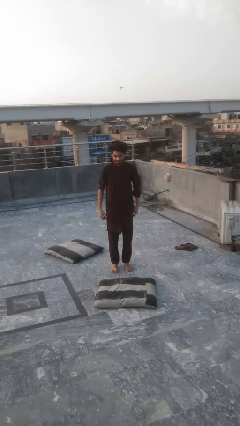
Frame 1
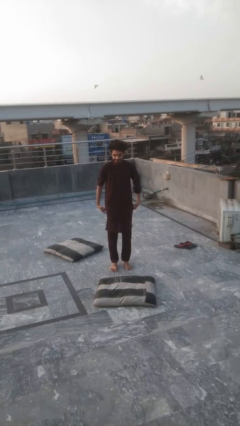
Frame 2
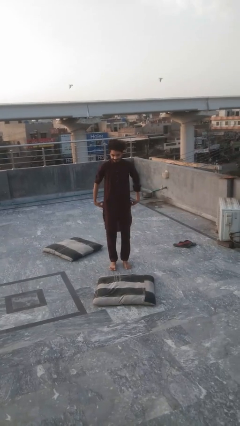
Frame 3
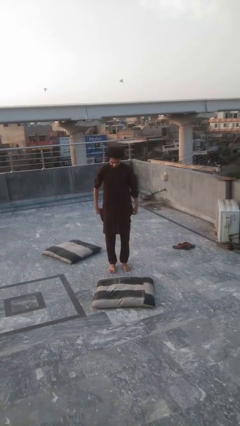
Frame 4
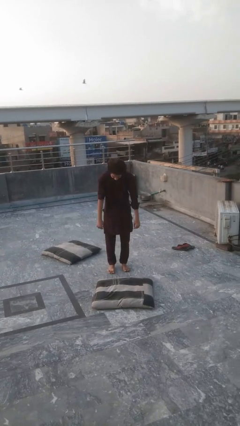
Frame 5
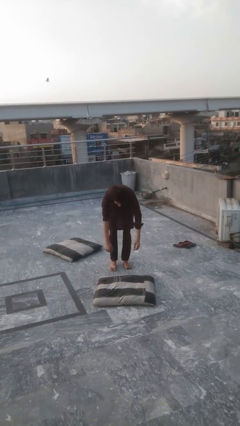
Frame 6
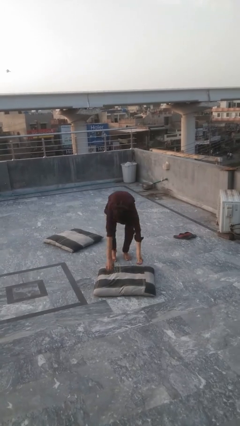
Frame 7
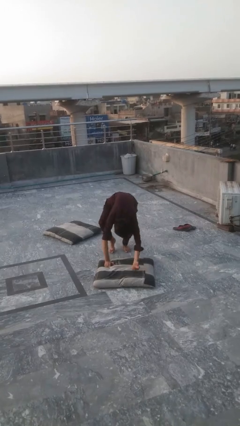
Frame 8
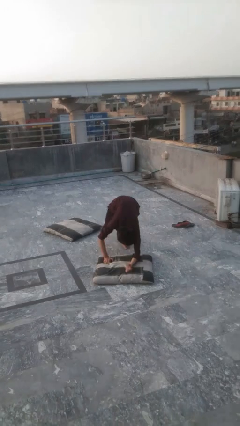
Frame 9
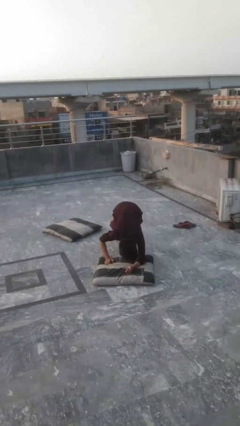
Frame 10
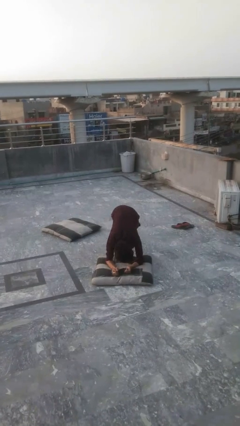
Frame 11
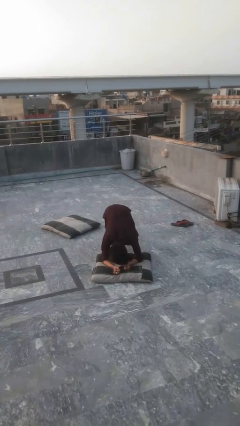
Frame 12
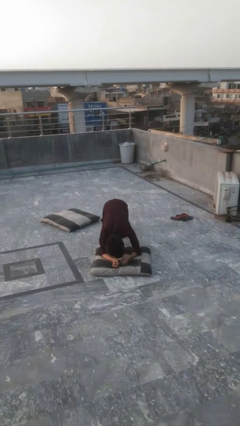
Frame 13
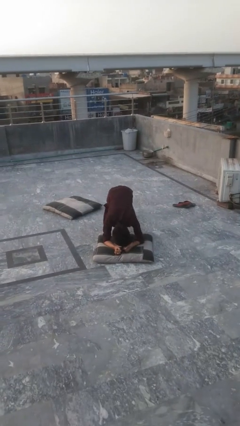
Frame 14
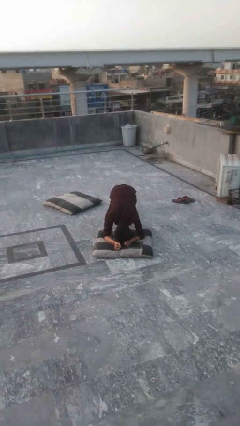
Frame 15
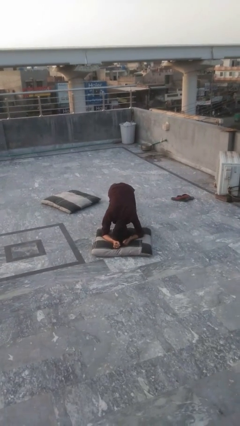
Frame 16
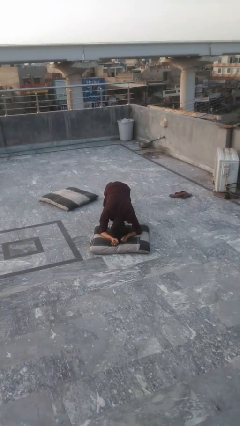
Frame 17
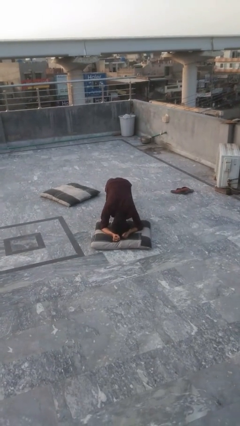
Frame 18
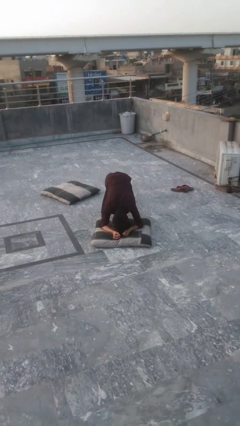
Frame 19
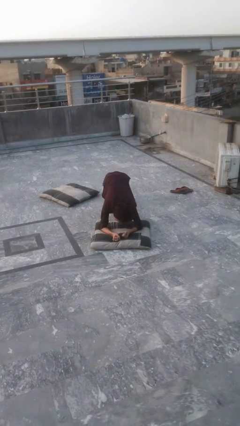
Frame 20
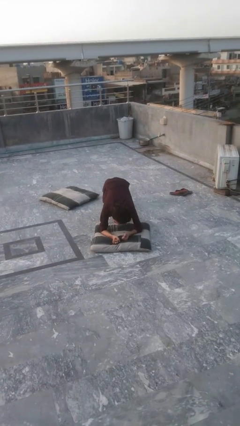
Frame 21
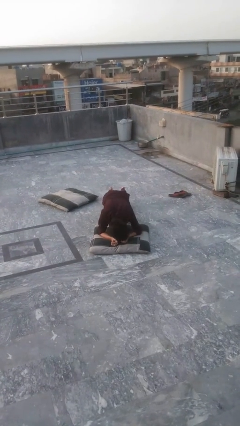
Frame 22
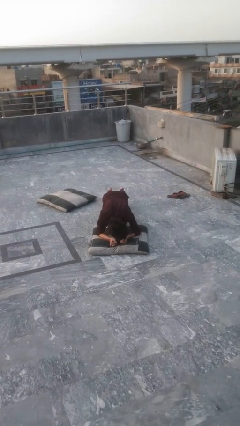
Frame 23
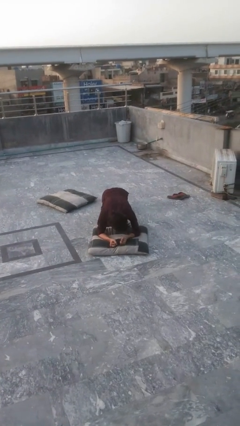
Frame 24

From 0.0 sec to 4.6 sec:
person exercises with plank

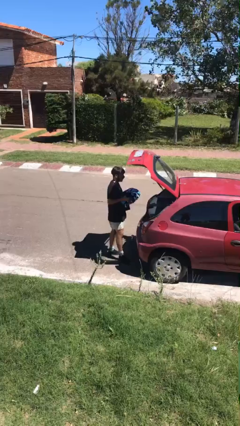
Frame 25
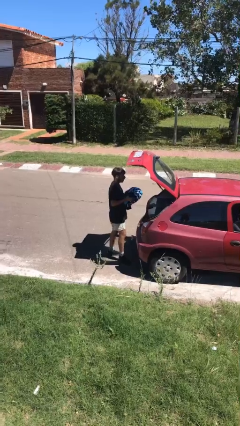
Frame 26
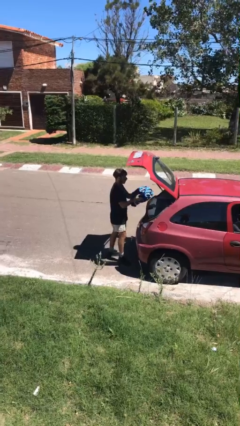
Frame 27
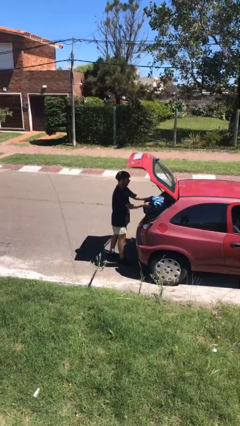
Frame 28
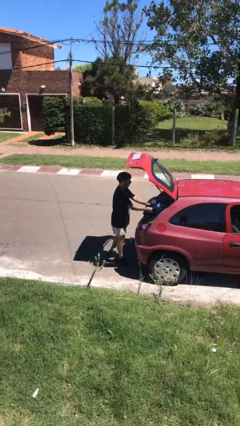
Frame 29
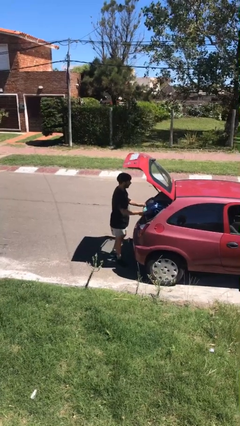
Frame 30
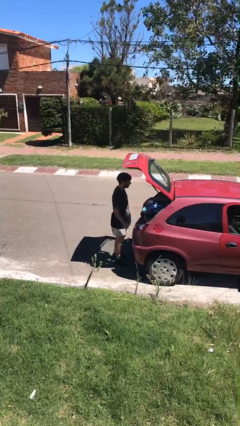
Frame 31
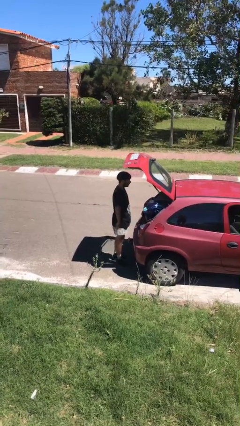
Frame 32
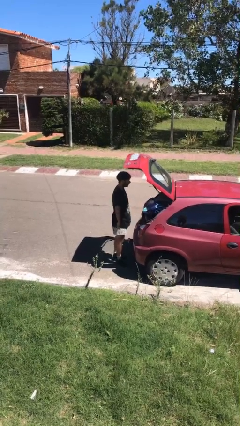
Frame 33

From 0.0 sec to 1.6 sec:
person loads car

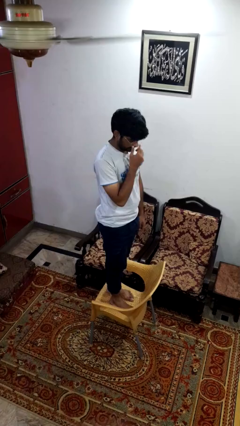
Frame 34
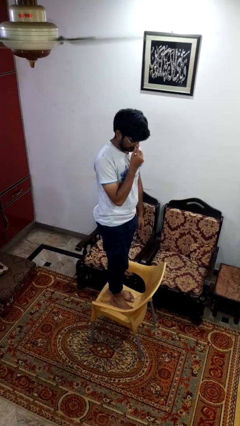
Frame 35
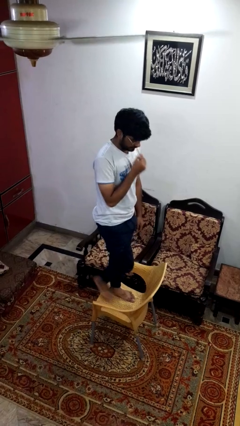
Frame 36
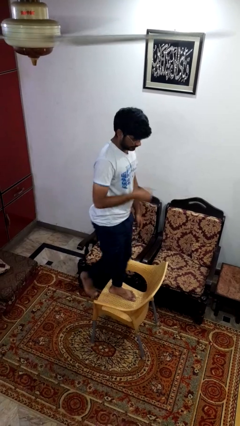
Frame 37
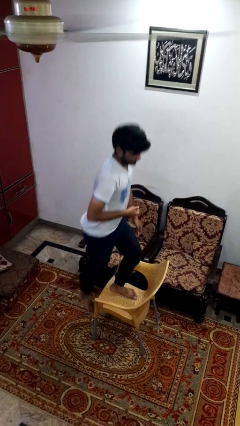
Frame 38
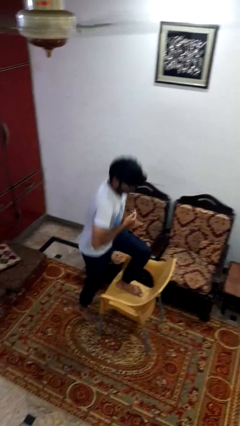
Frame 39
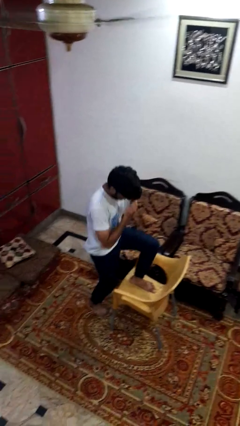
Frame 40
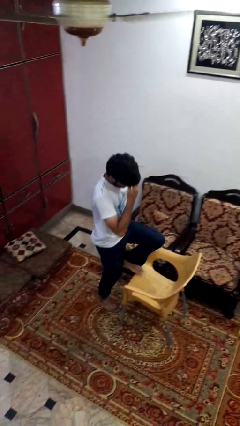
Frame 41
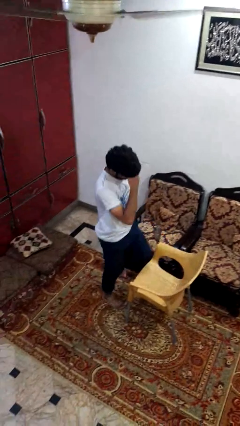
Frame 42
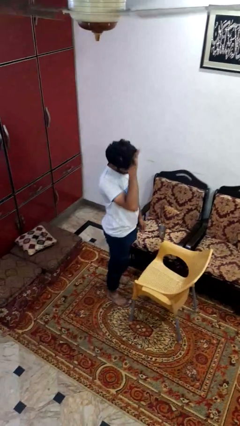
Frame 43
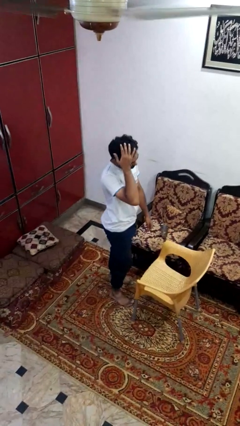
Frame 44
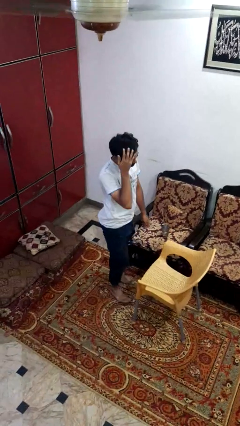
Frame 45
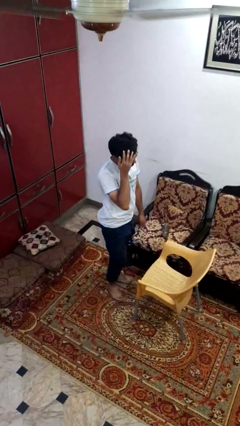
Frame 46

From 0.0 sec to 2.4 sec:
person climbs off chair

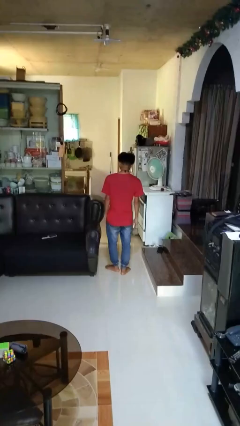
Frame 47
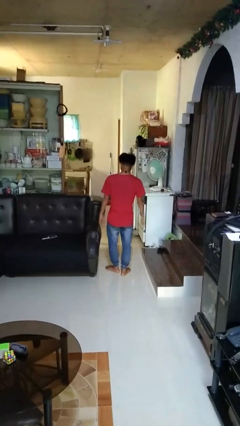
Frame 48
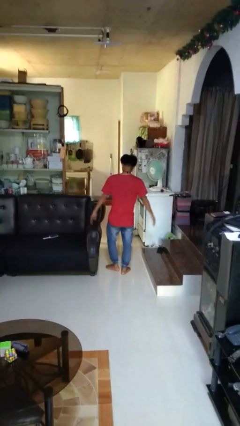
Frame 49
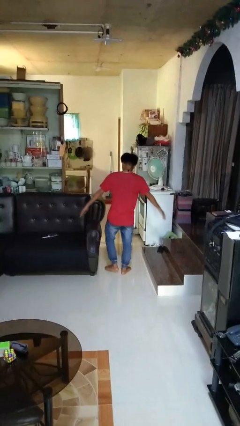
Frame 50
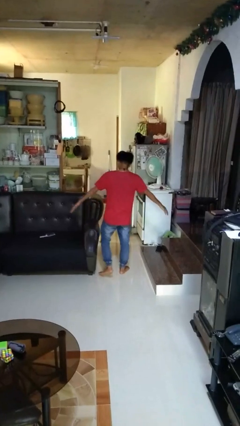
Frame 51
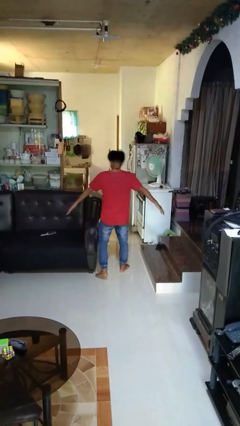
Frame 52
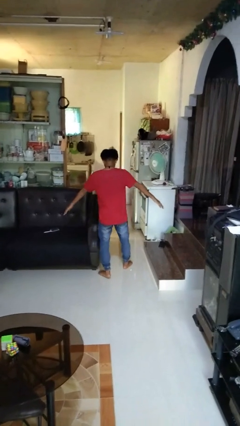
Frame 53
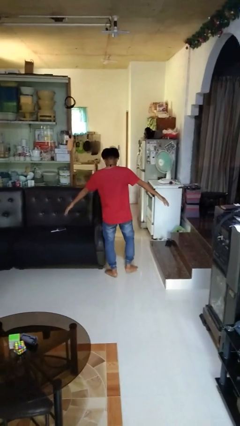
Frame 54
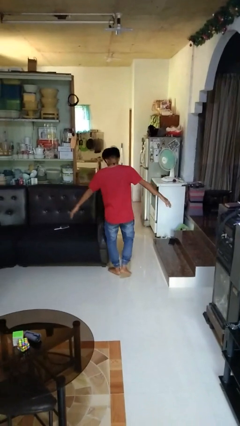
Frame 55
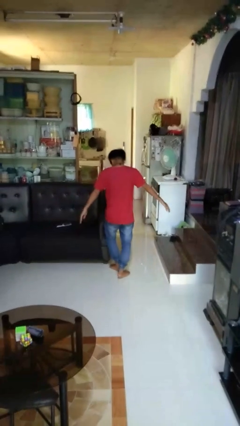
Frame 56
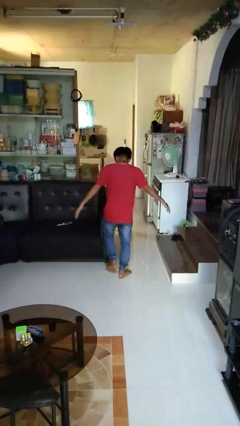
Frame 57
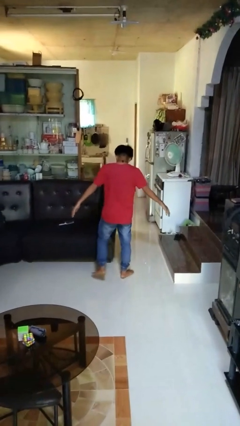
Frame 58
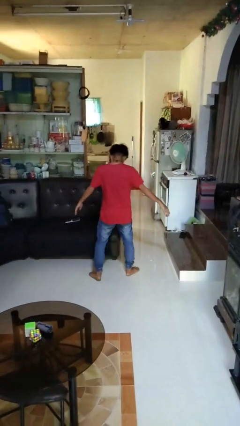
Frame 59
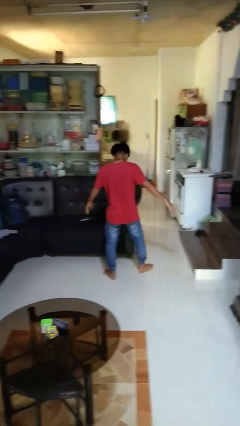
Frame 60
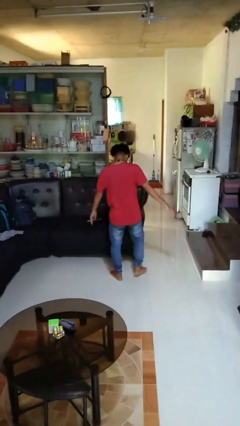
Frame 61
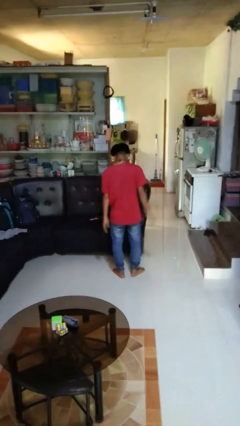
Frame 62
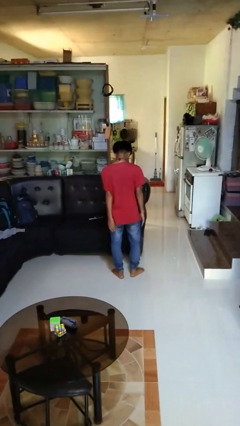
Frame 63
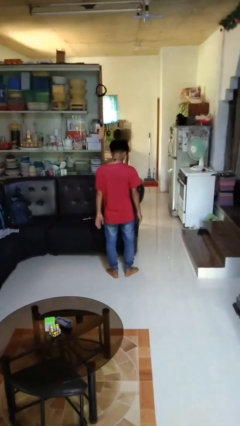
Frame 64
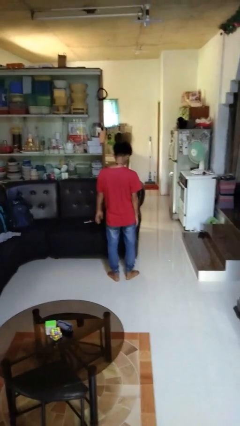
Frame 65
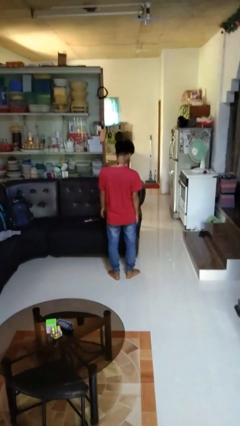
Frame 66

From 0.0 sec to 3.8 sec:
person walks tiptoe

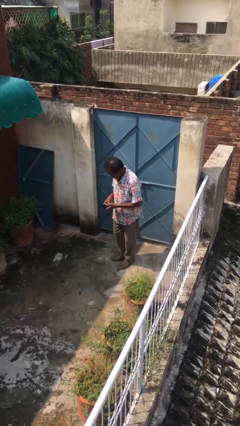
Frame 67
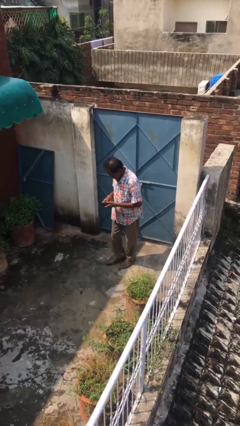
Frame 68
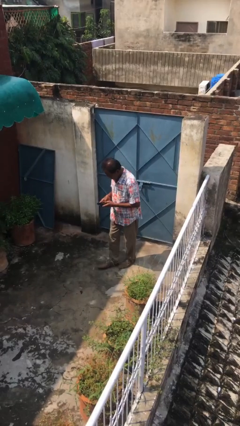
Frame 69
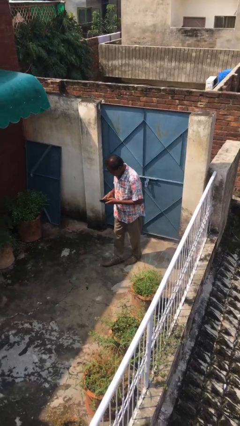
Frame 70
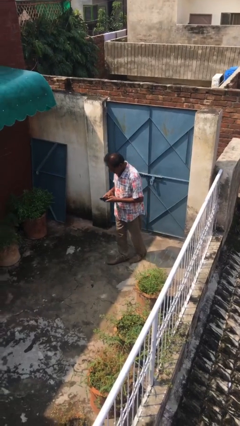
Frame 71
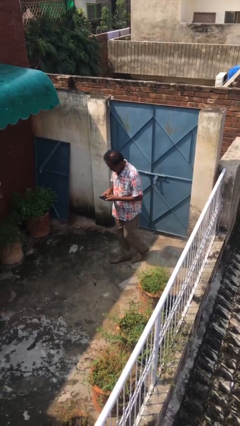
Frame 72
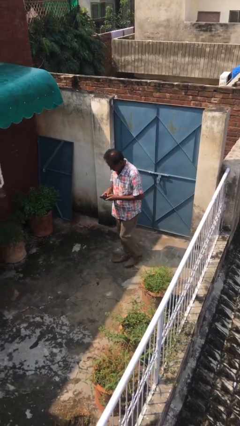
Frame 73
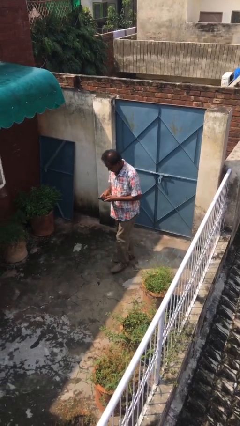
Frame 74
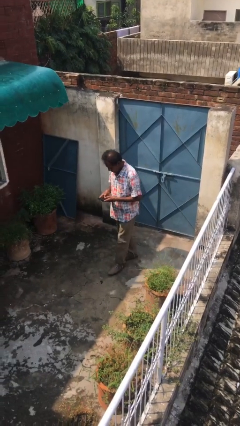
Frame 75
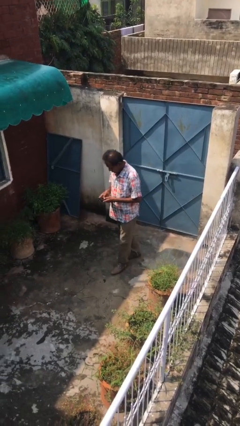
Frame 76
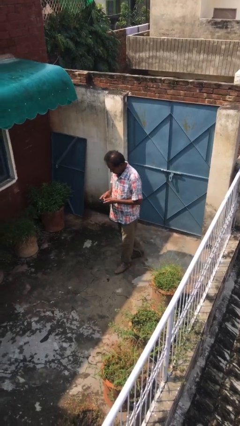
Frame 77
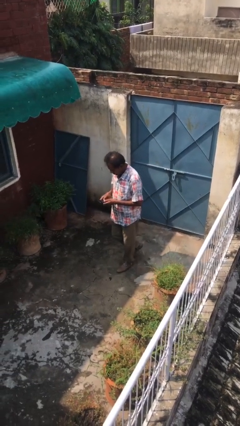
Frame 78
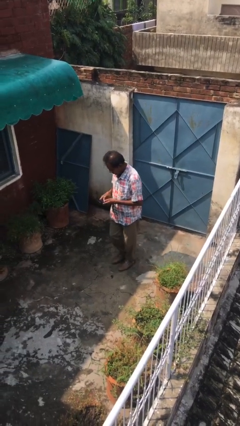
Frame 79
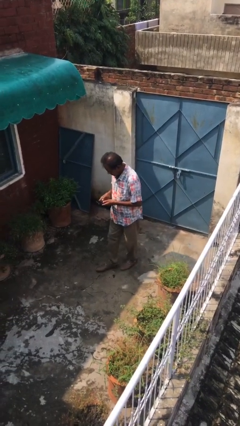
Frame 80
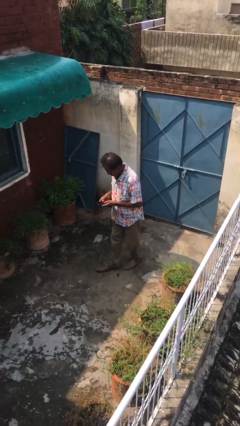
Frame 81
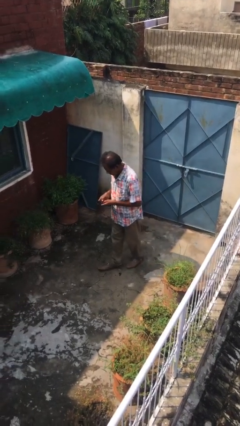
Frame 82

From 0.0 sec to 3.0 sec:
person texts on phone

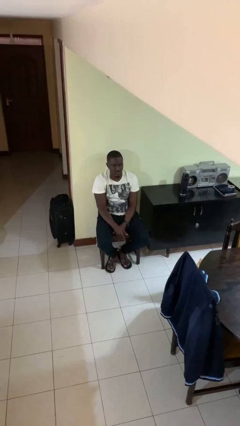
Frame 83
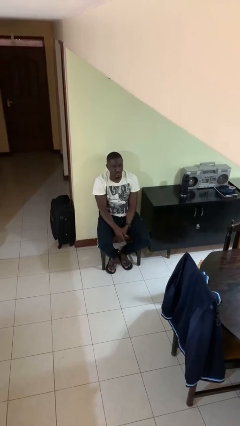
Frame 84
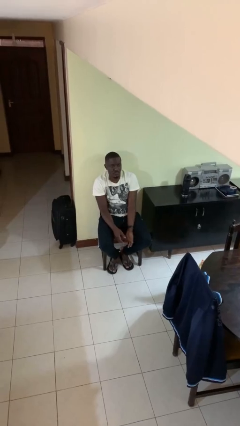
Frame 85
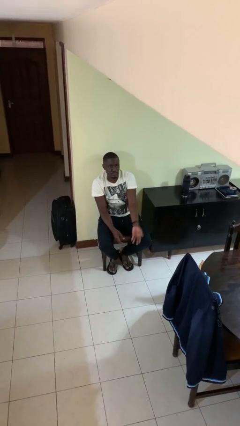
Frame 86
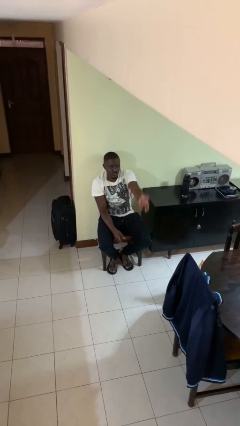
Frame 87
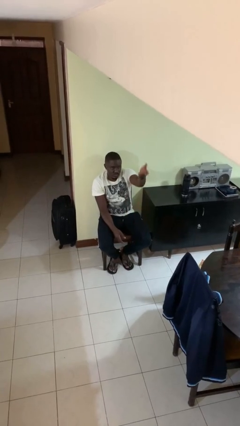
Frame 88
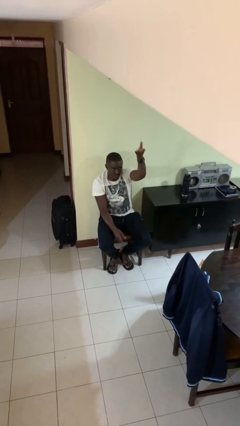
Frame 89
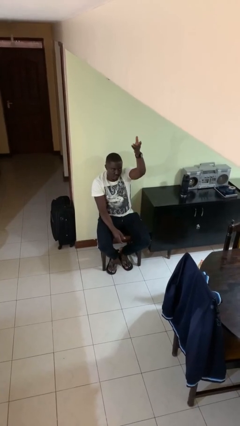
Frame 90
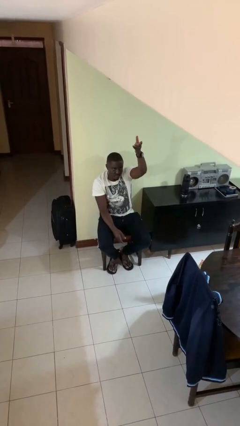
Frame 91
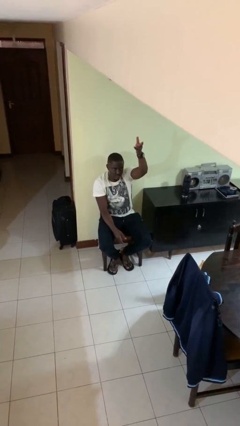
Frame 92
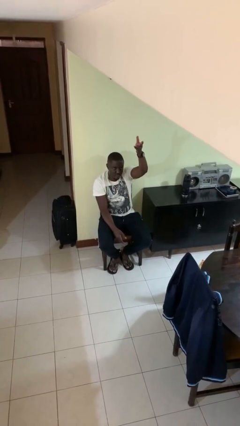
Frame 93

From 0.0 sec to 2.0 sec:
person gestures swipe up
